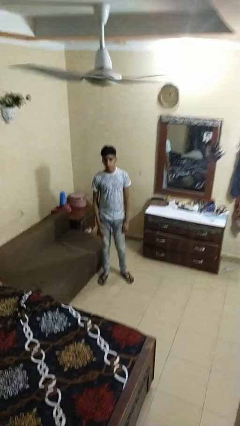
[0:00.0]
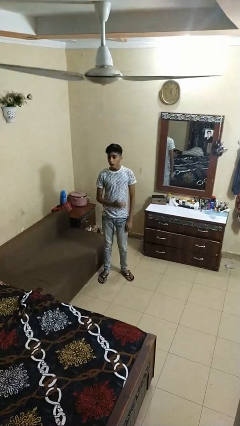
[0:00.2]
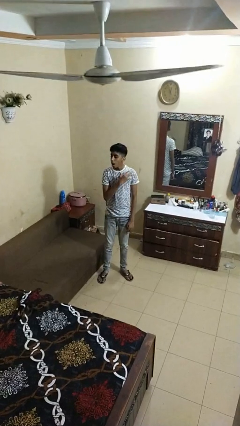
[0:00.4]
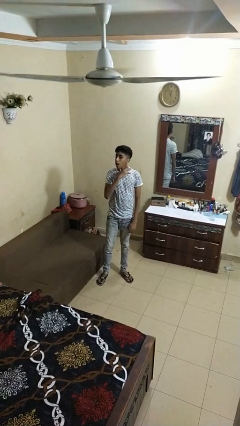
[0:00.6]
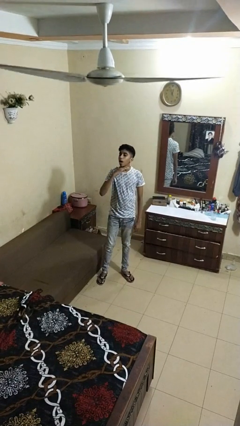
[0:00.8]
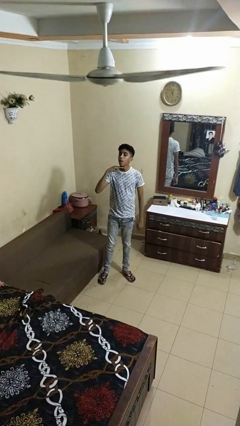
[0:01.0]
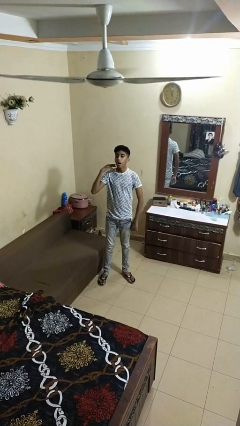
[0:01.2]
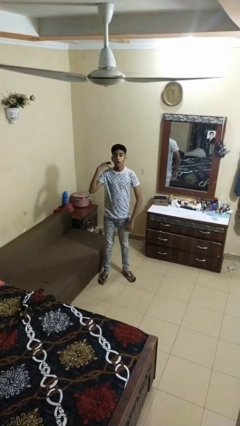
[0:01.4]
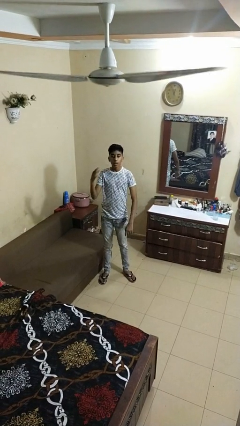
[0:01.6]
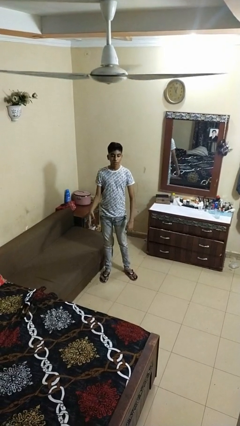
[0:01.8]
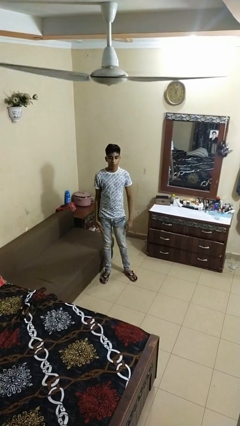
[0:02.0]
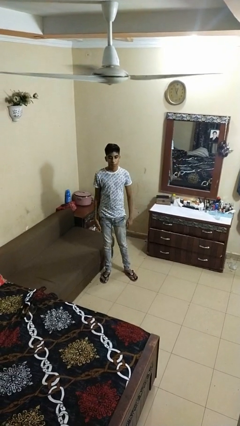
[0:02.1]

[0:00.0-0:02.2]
person gestures cut

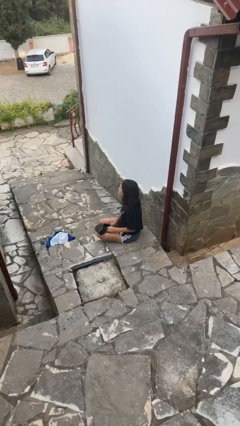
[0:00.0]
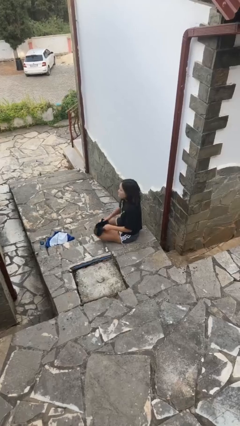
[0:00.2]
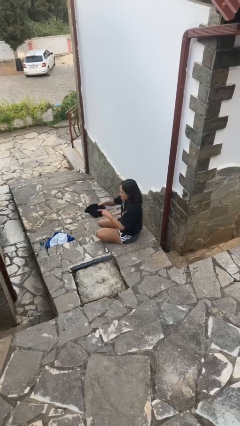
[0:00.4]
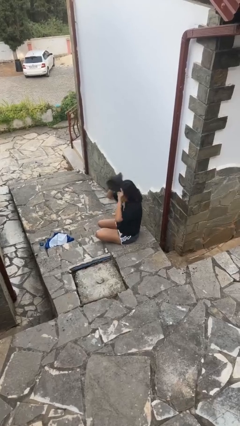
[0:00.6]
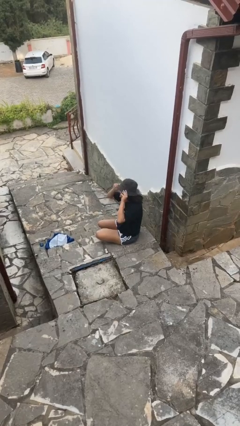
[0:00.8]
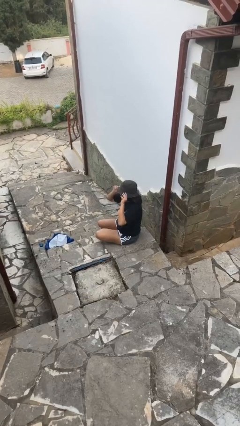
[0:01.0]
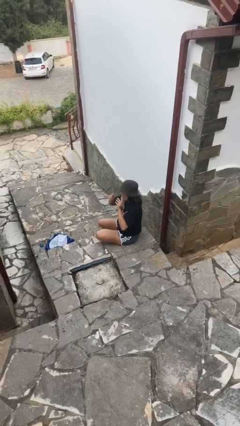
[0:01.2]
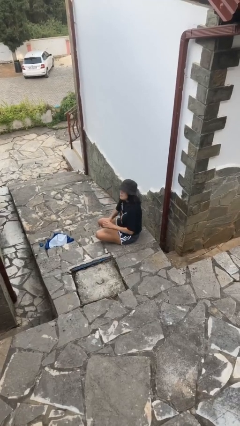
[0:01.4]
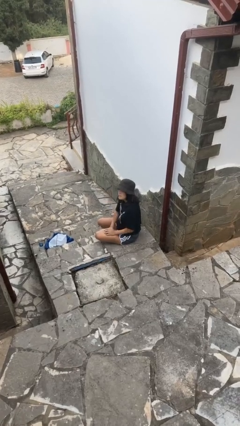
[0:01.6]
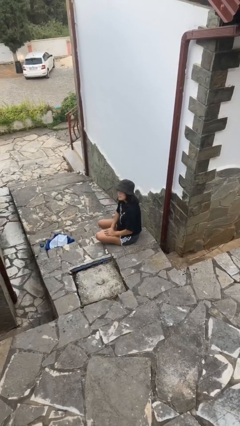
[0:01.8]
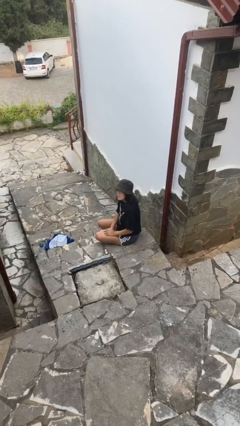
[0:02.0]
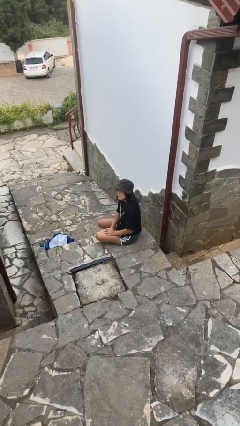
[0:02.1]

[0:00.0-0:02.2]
person puts on hat

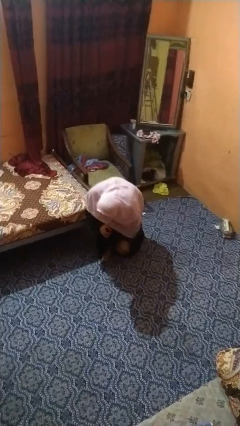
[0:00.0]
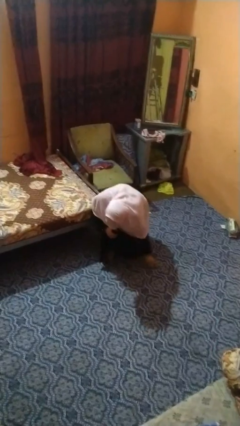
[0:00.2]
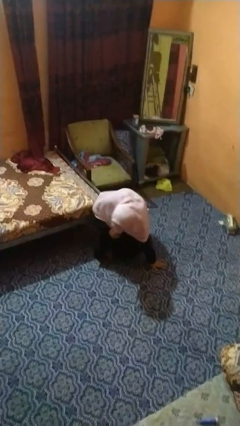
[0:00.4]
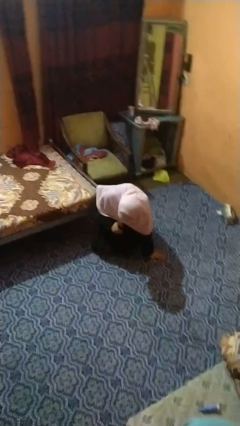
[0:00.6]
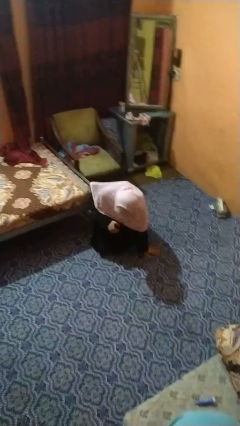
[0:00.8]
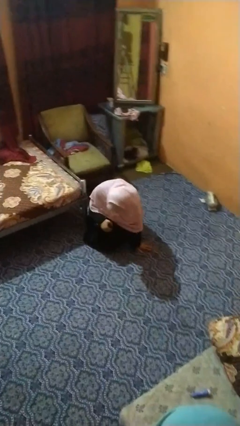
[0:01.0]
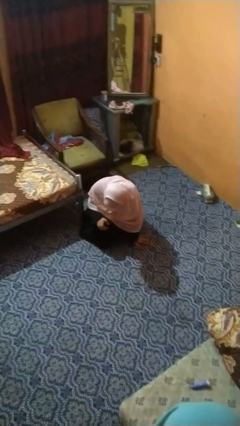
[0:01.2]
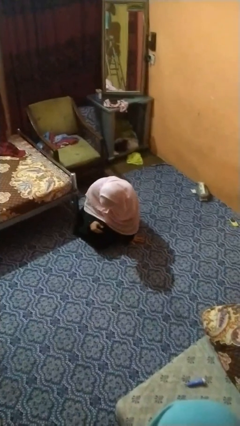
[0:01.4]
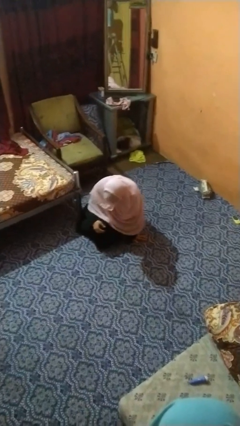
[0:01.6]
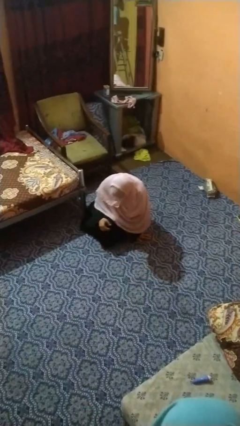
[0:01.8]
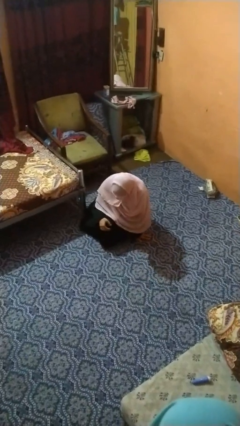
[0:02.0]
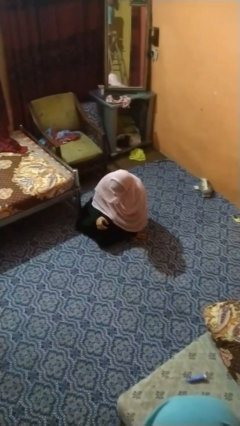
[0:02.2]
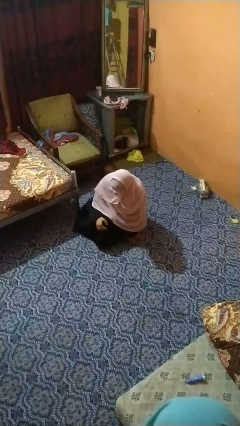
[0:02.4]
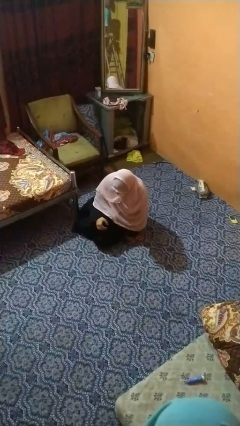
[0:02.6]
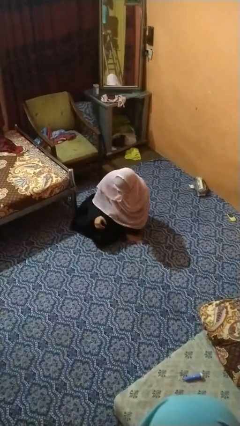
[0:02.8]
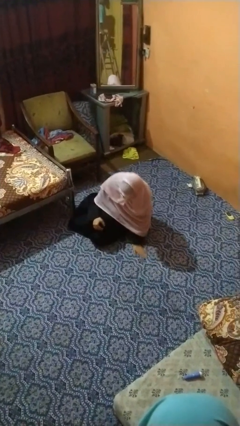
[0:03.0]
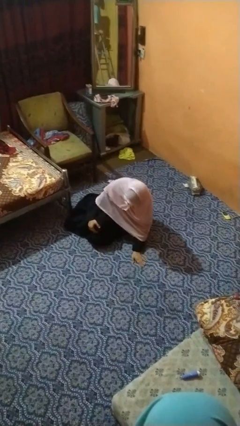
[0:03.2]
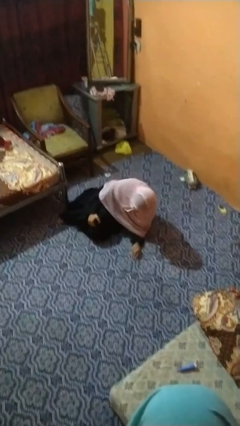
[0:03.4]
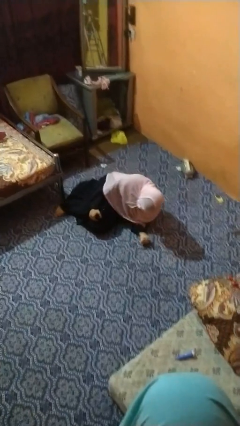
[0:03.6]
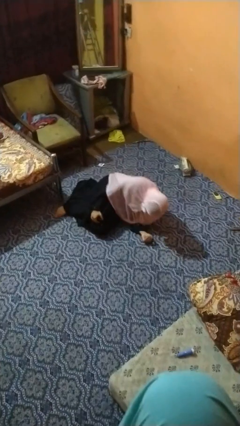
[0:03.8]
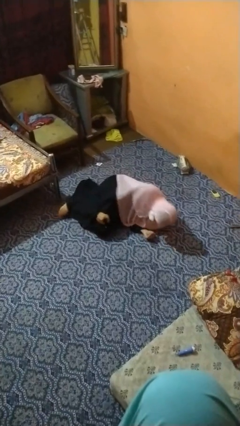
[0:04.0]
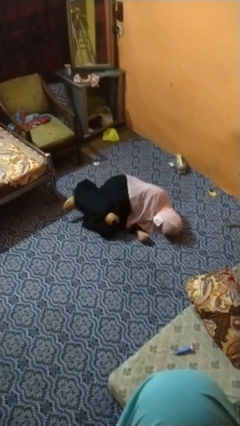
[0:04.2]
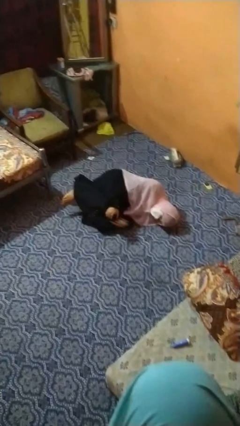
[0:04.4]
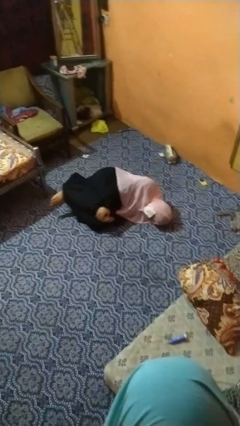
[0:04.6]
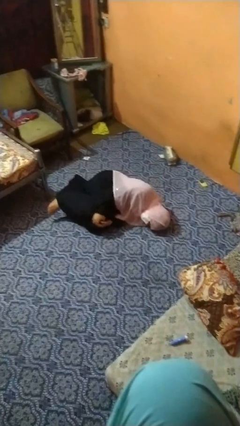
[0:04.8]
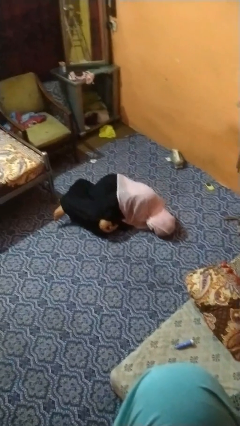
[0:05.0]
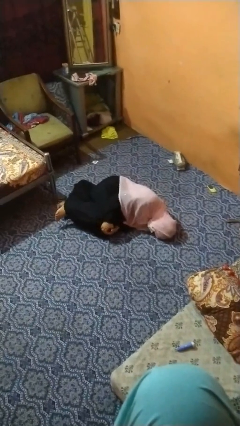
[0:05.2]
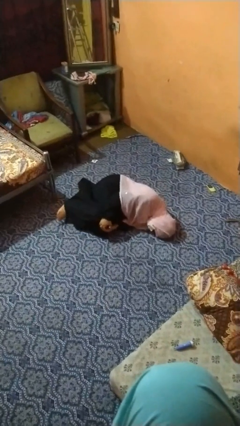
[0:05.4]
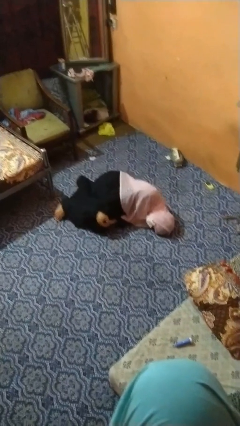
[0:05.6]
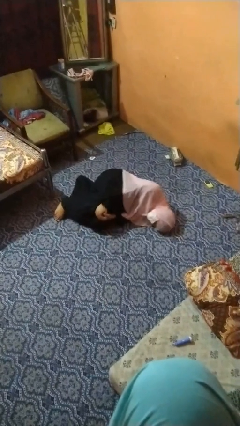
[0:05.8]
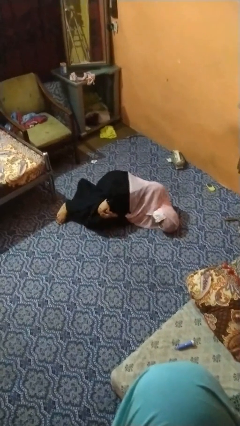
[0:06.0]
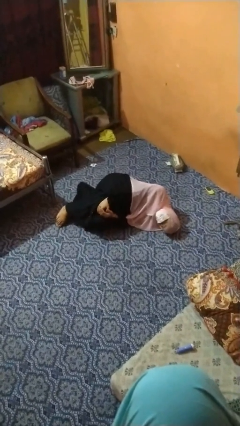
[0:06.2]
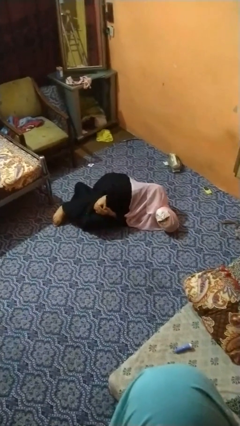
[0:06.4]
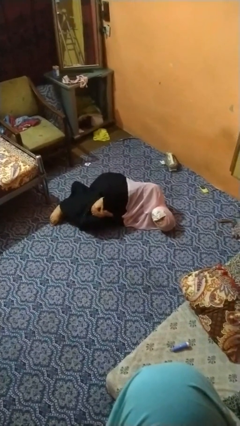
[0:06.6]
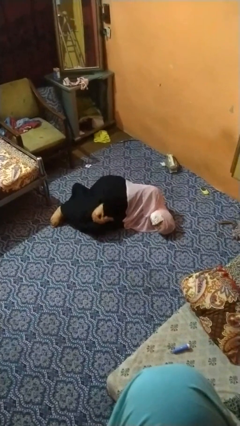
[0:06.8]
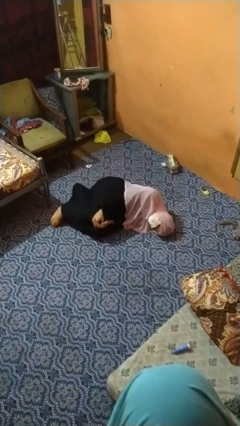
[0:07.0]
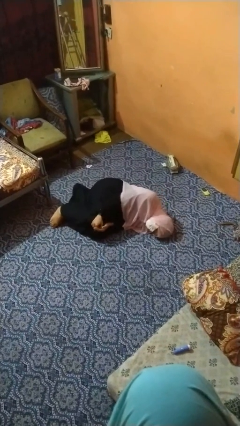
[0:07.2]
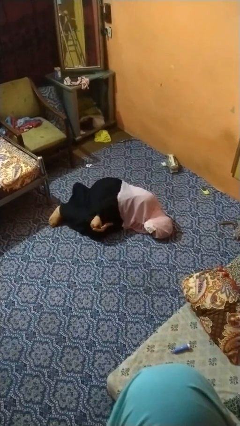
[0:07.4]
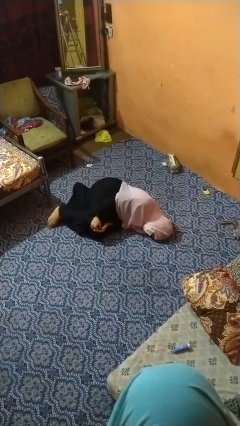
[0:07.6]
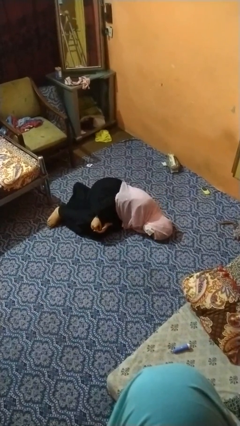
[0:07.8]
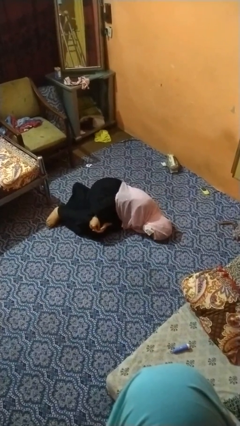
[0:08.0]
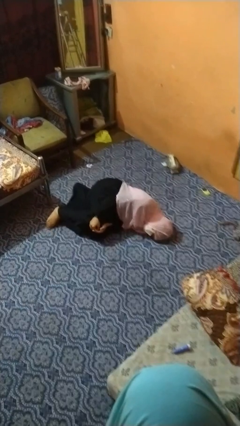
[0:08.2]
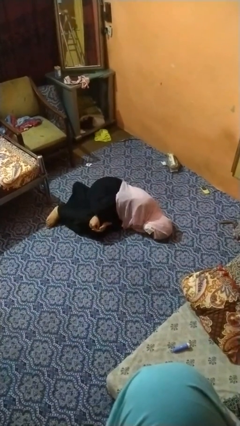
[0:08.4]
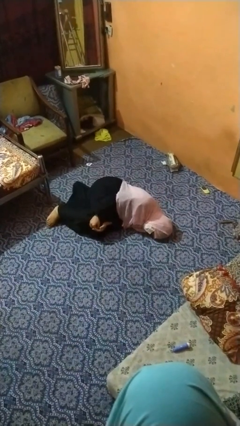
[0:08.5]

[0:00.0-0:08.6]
person lies down on floor

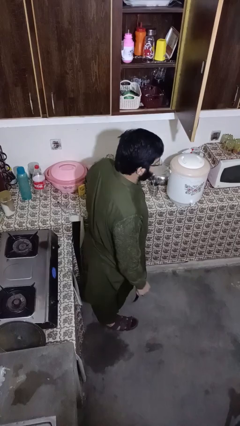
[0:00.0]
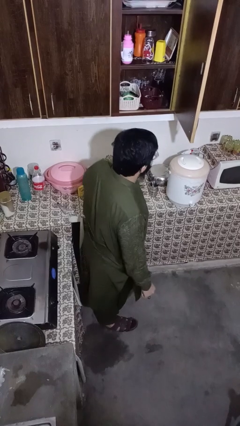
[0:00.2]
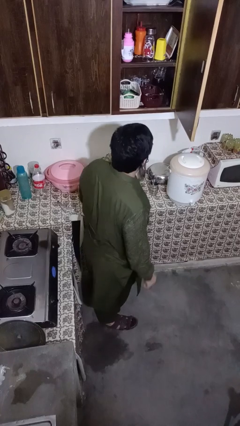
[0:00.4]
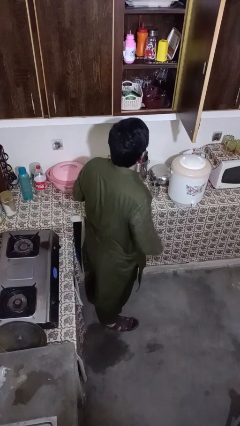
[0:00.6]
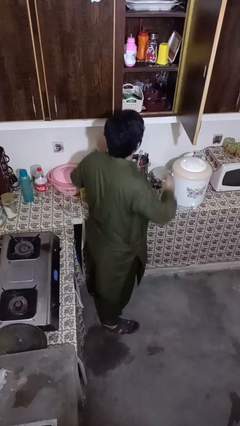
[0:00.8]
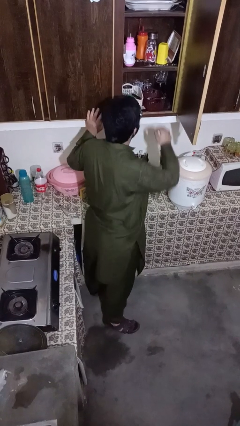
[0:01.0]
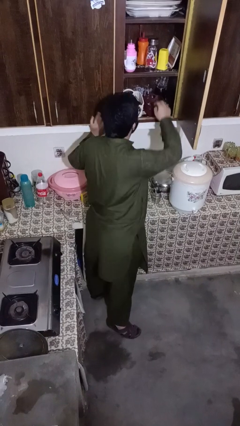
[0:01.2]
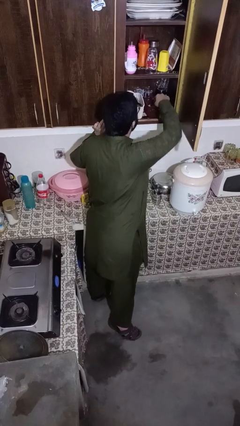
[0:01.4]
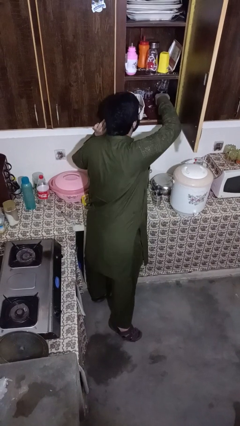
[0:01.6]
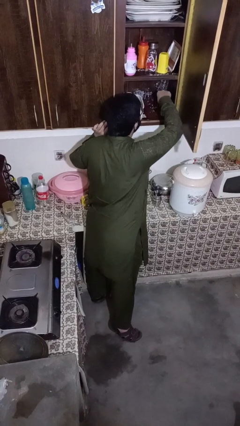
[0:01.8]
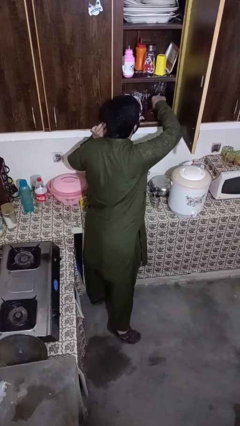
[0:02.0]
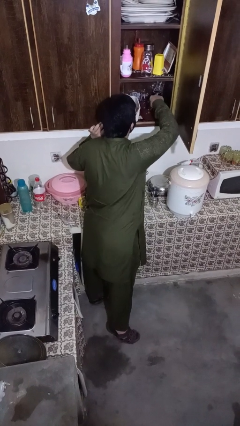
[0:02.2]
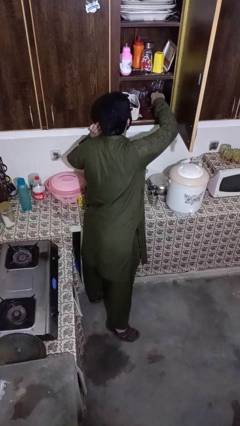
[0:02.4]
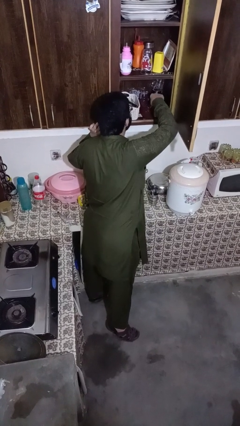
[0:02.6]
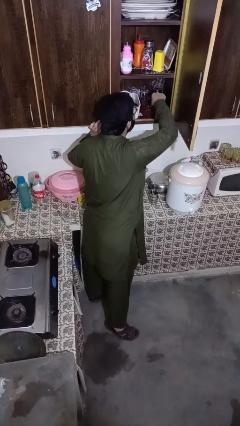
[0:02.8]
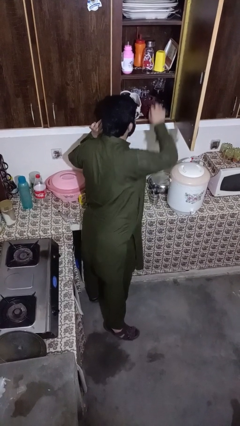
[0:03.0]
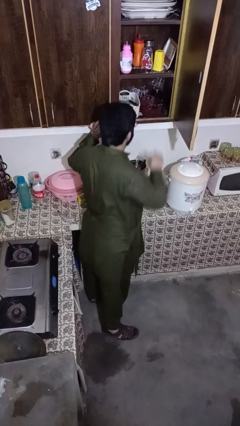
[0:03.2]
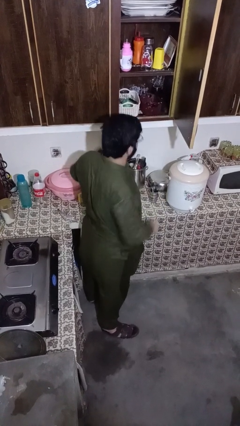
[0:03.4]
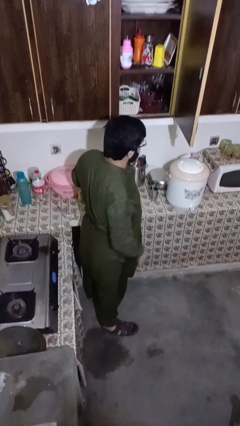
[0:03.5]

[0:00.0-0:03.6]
person searches in kitchen drawer

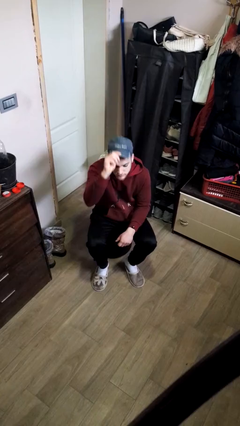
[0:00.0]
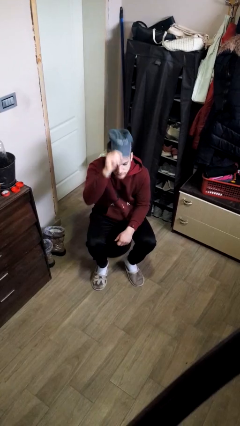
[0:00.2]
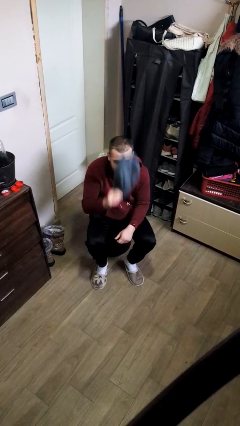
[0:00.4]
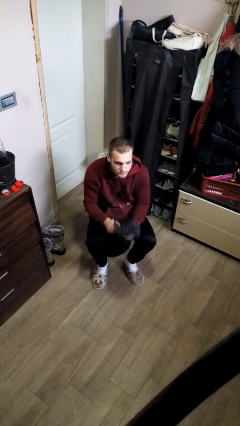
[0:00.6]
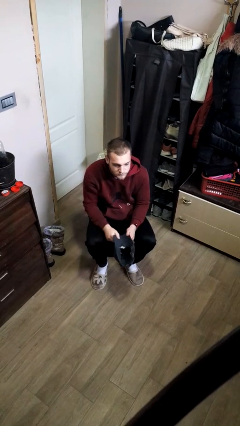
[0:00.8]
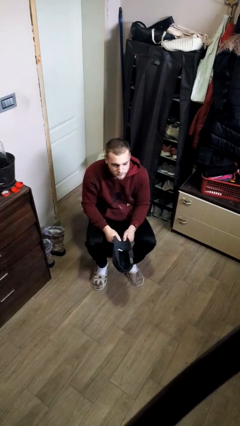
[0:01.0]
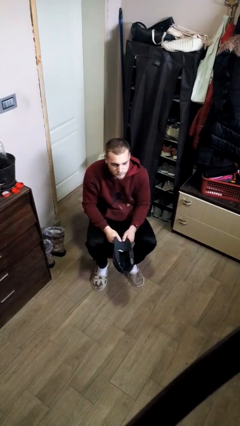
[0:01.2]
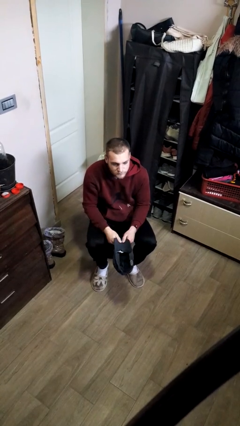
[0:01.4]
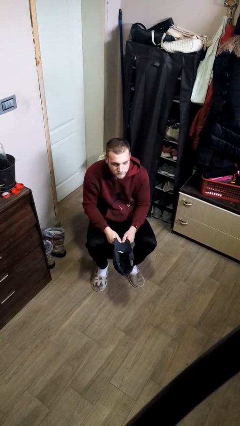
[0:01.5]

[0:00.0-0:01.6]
person takes off hat
